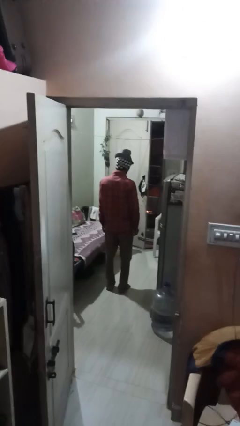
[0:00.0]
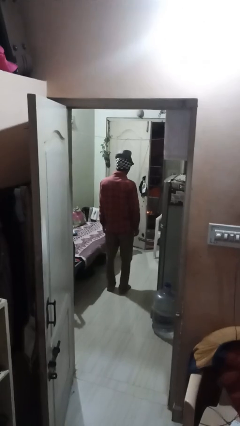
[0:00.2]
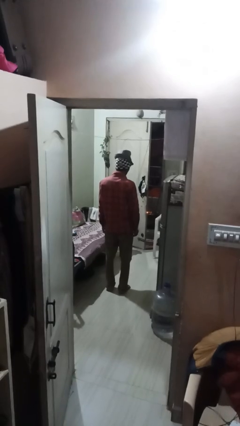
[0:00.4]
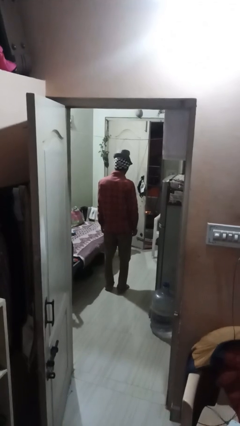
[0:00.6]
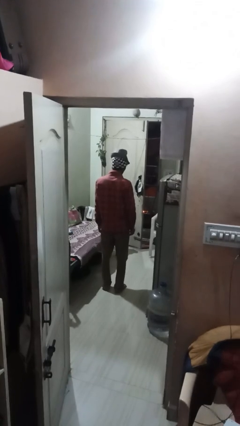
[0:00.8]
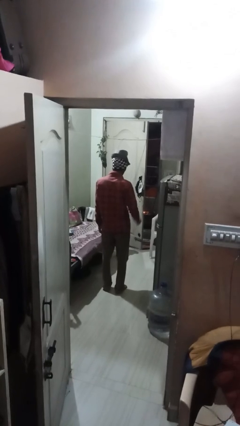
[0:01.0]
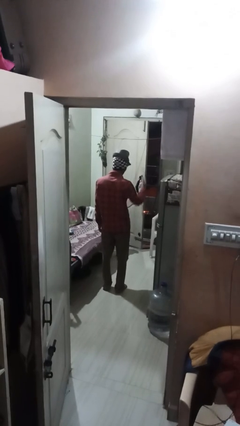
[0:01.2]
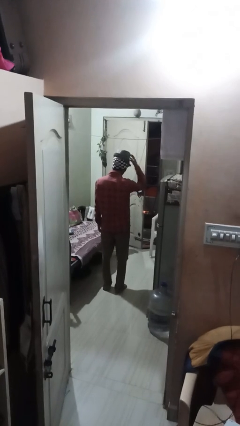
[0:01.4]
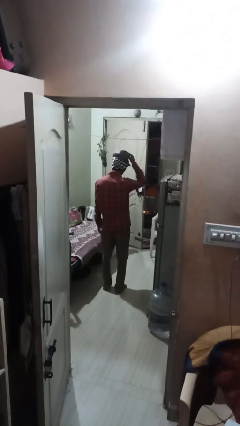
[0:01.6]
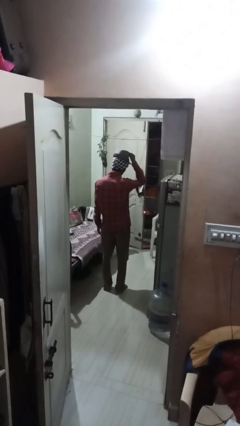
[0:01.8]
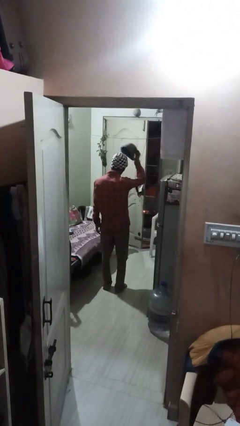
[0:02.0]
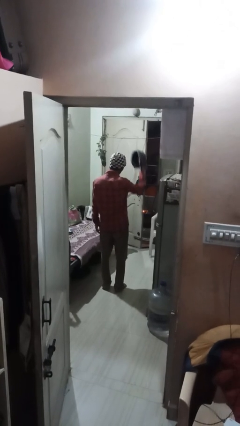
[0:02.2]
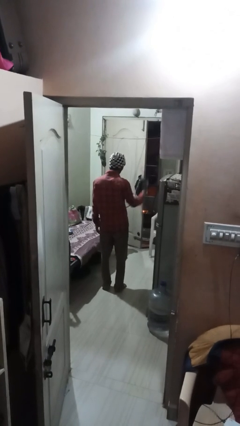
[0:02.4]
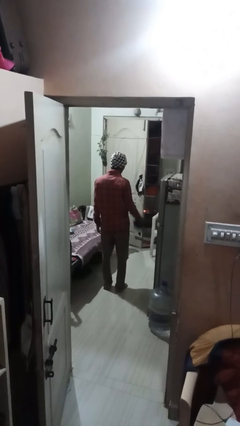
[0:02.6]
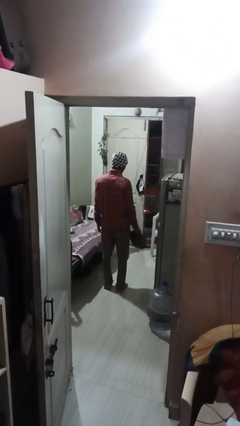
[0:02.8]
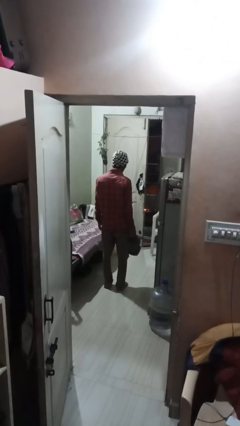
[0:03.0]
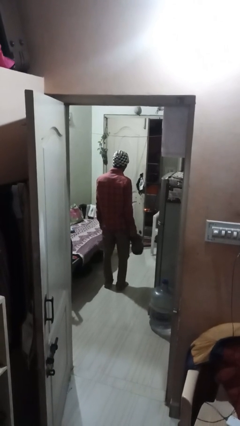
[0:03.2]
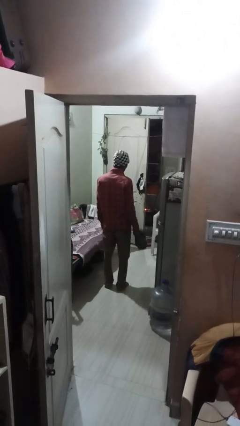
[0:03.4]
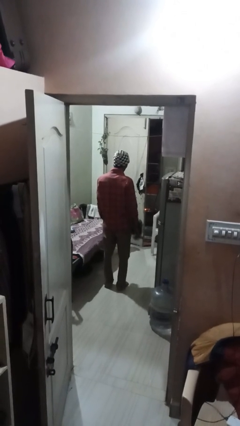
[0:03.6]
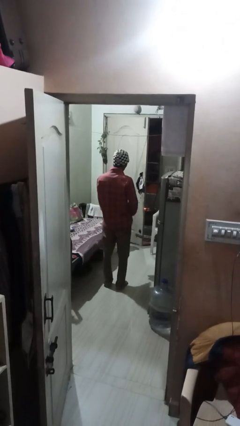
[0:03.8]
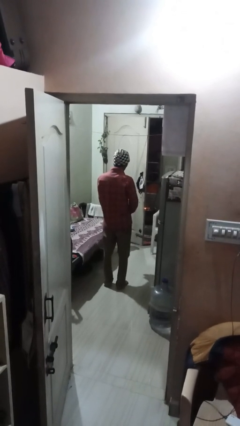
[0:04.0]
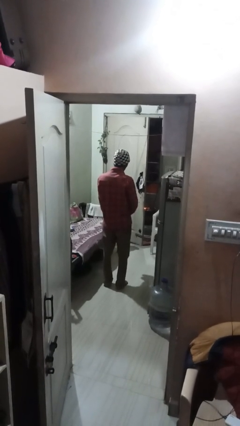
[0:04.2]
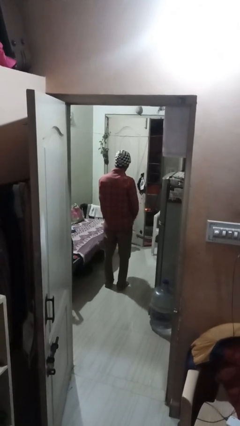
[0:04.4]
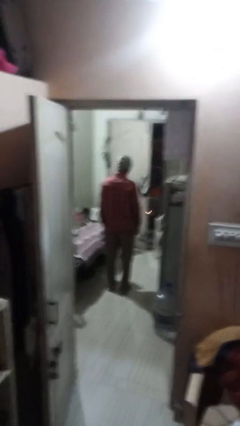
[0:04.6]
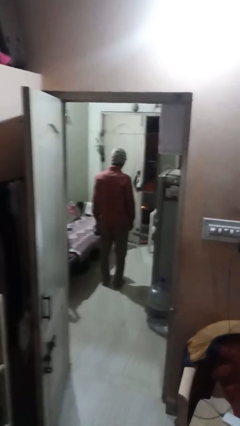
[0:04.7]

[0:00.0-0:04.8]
person takes off hat

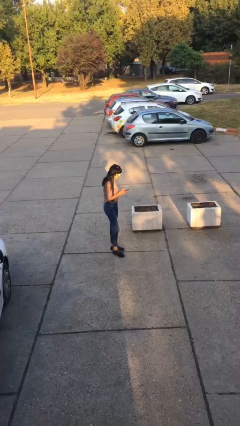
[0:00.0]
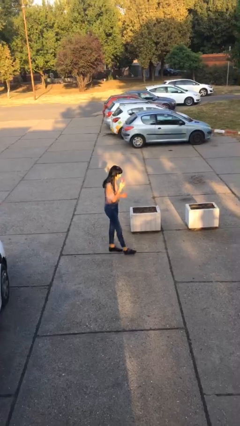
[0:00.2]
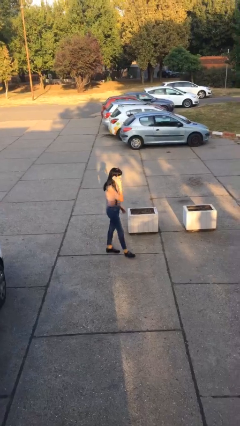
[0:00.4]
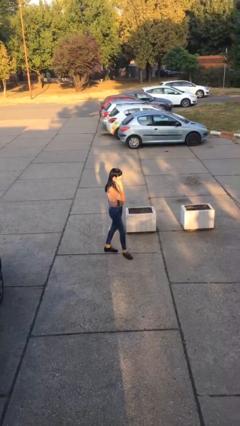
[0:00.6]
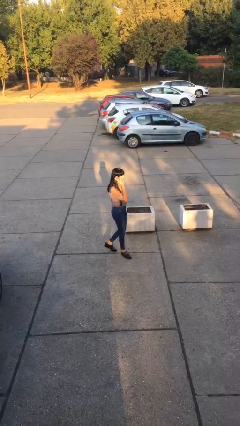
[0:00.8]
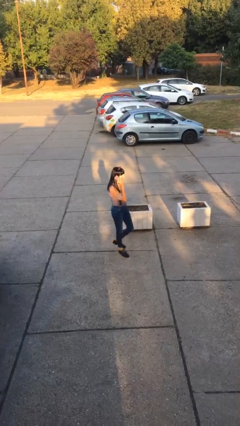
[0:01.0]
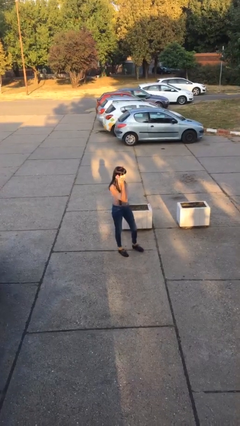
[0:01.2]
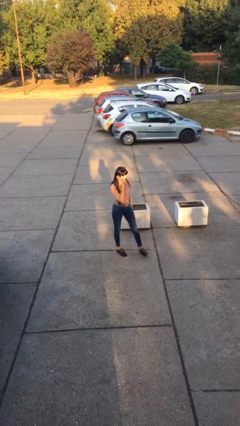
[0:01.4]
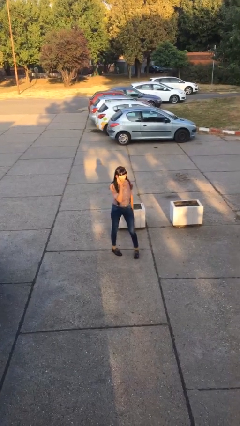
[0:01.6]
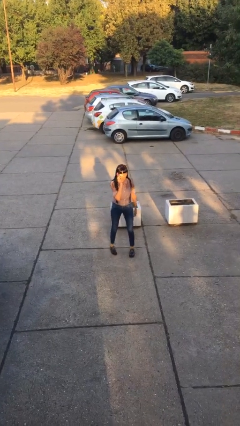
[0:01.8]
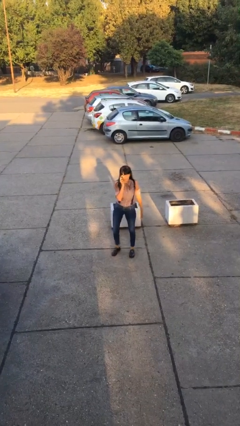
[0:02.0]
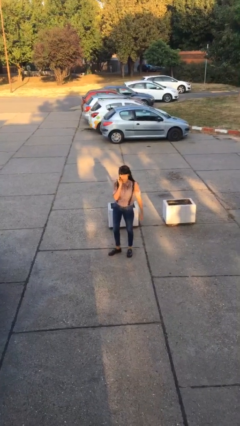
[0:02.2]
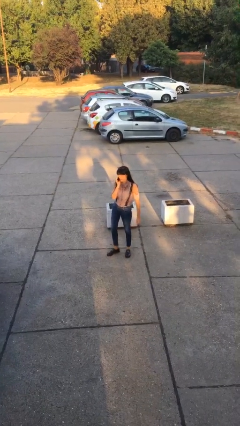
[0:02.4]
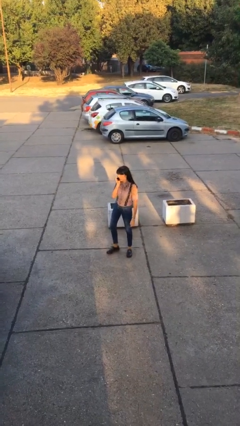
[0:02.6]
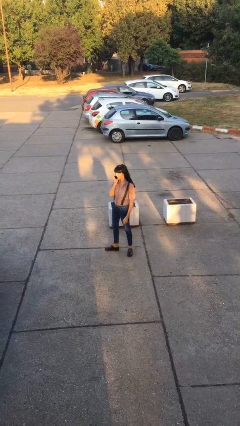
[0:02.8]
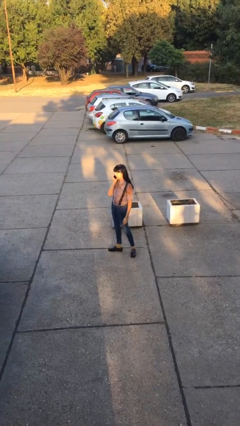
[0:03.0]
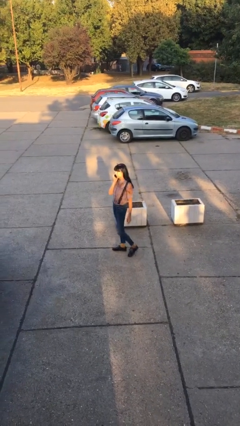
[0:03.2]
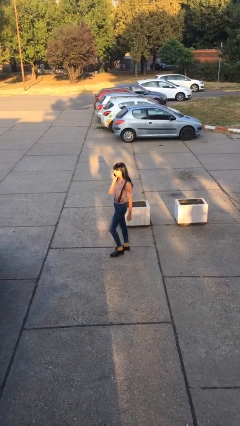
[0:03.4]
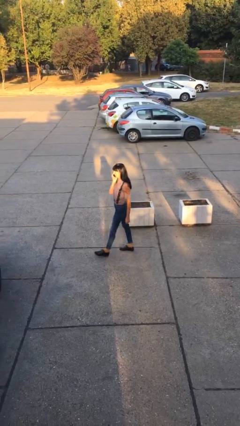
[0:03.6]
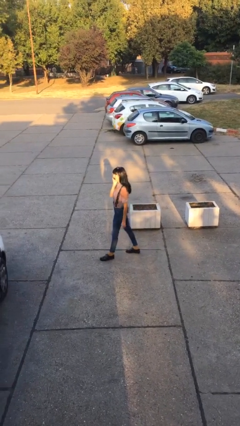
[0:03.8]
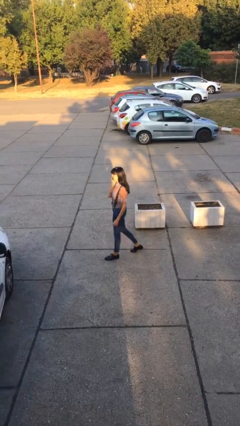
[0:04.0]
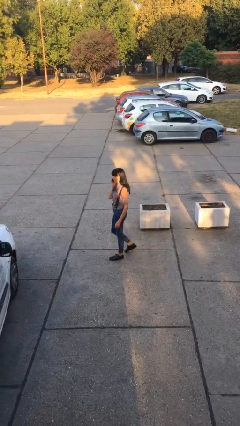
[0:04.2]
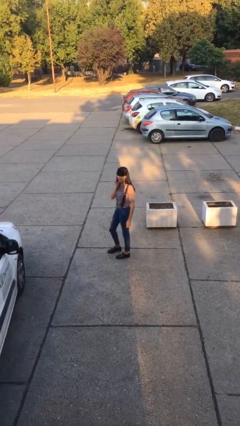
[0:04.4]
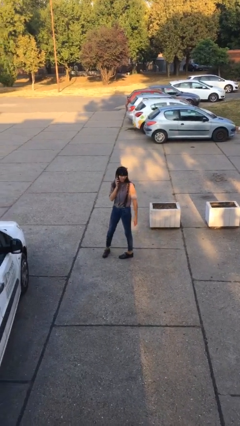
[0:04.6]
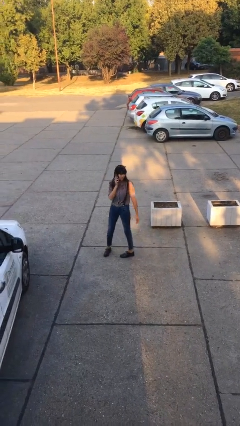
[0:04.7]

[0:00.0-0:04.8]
person talks on phone

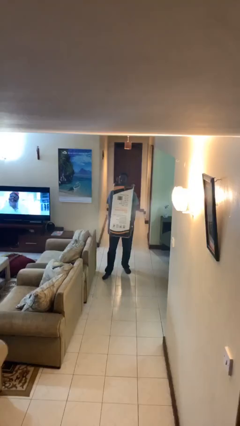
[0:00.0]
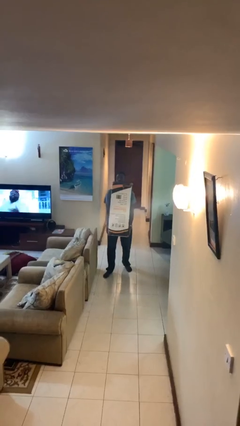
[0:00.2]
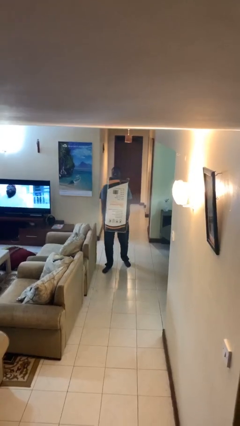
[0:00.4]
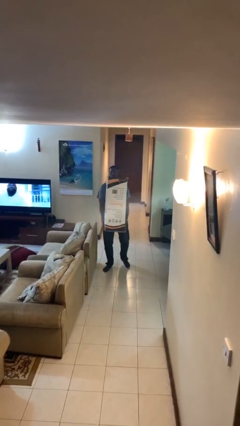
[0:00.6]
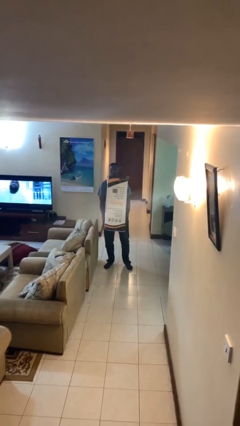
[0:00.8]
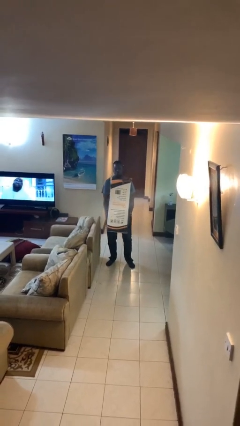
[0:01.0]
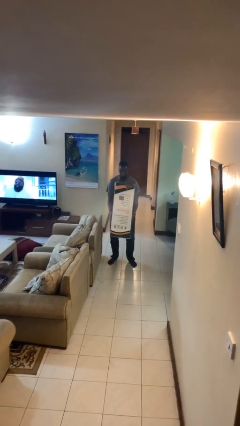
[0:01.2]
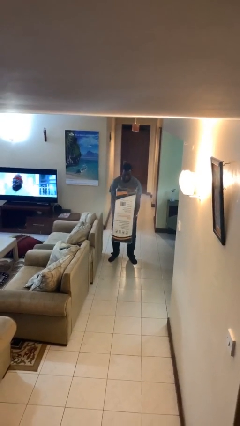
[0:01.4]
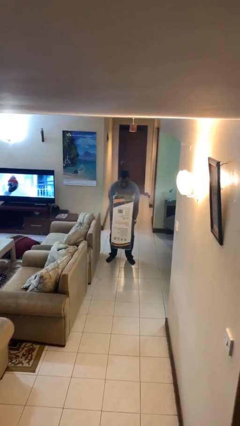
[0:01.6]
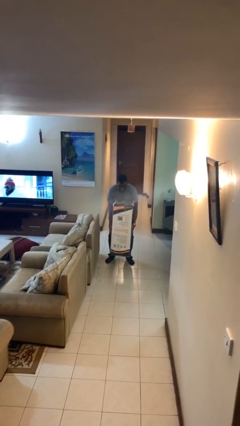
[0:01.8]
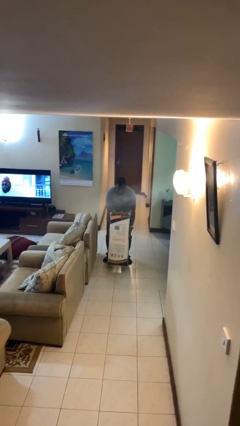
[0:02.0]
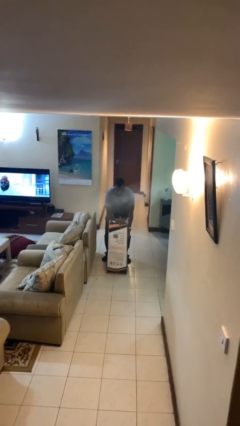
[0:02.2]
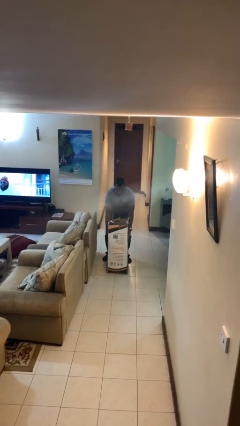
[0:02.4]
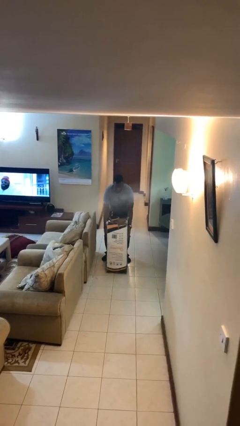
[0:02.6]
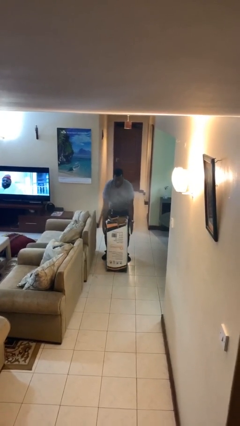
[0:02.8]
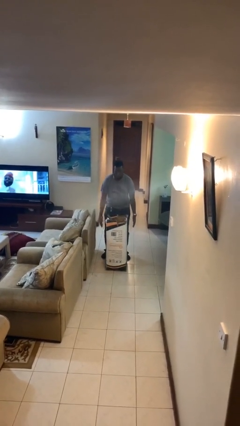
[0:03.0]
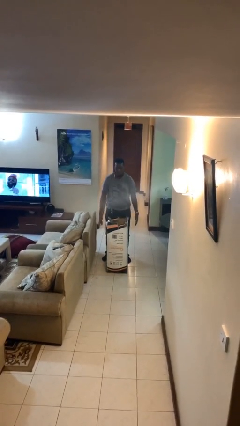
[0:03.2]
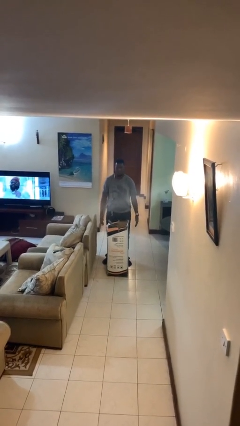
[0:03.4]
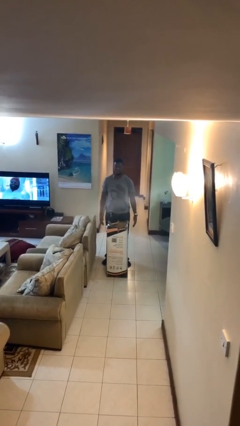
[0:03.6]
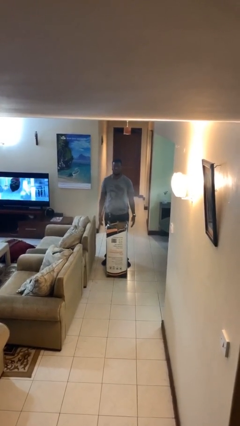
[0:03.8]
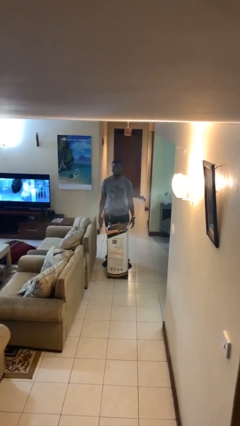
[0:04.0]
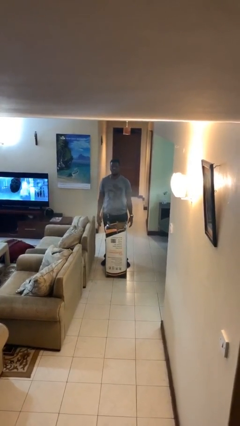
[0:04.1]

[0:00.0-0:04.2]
person puts down object on floor

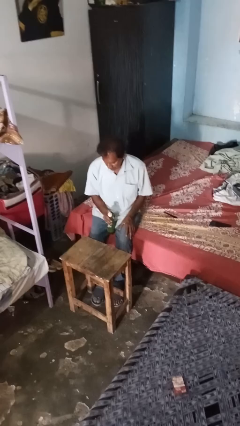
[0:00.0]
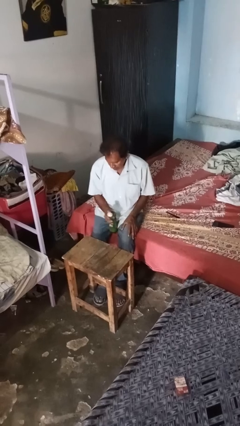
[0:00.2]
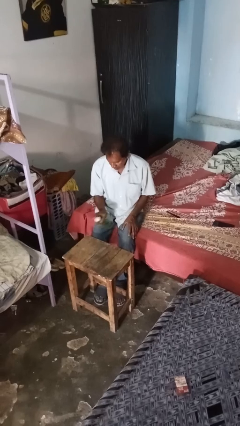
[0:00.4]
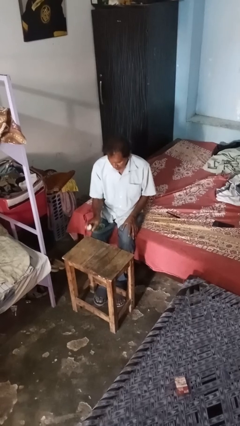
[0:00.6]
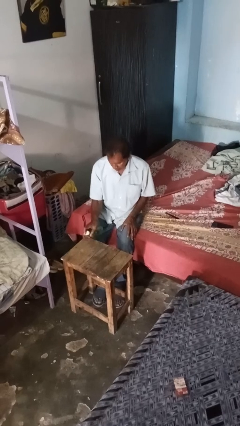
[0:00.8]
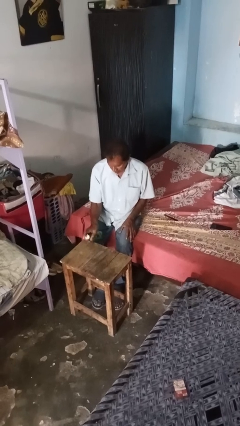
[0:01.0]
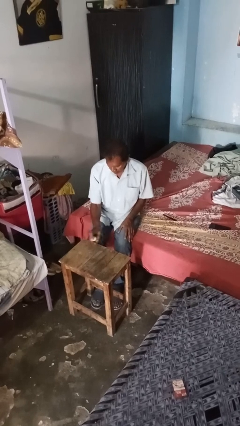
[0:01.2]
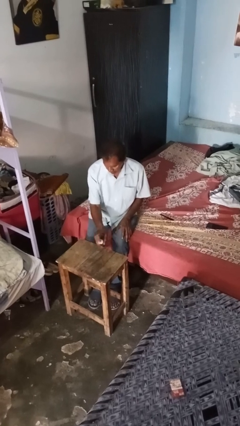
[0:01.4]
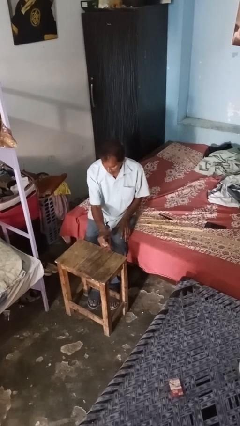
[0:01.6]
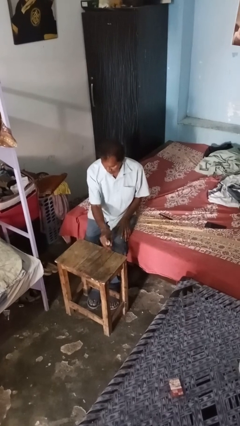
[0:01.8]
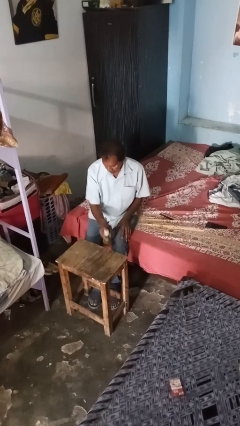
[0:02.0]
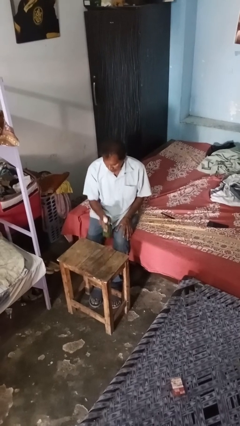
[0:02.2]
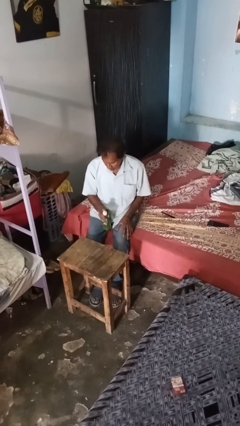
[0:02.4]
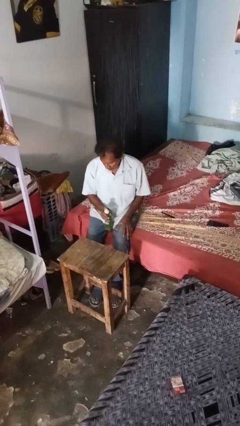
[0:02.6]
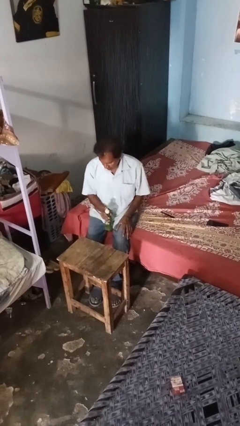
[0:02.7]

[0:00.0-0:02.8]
person sprays from bottle

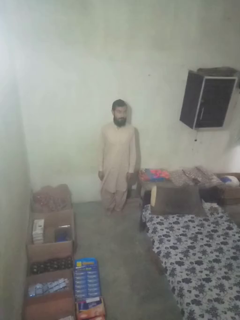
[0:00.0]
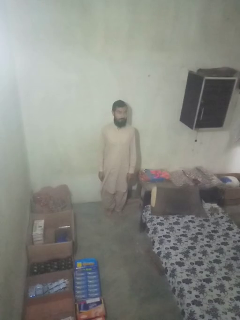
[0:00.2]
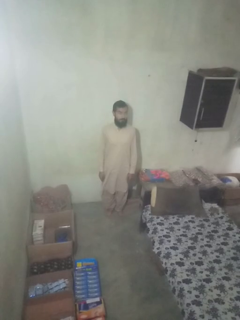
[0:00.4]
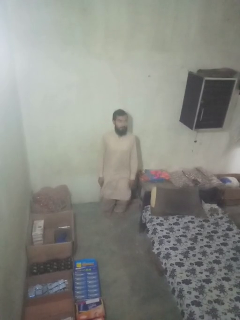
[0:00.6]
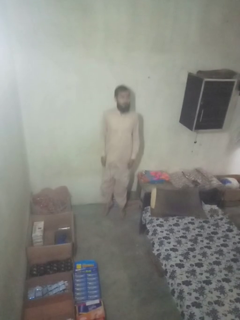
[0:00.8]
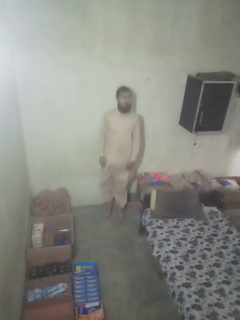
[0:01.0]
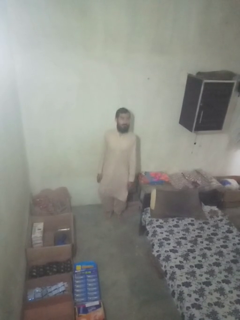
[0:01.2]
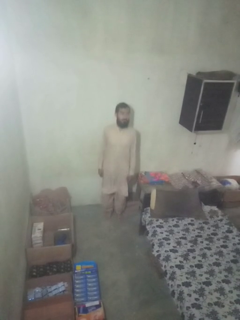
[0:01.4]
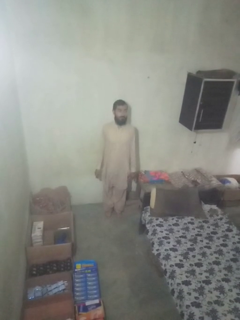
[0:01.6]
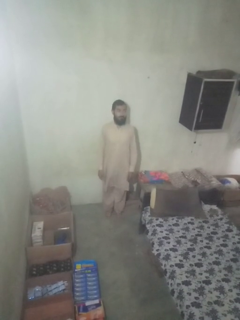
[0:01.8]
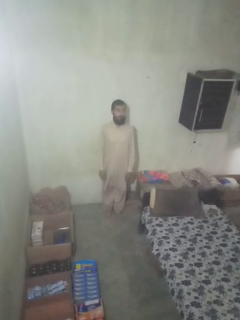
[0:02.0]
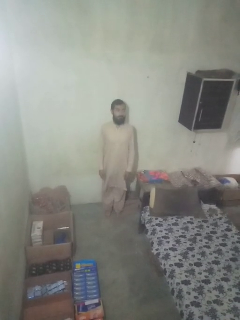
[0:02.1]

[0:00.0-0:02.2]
person jumps
